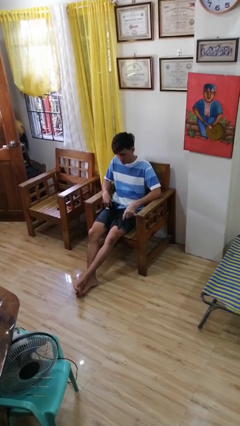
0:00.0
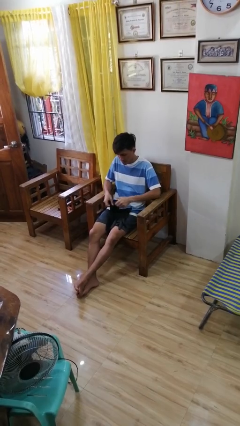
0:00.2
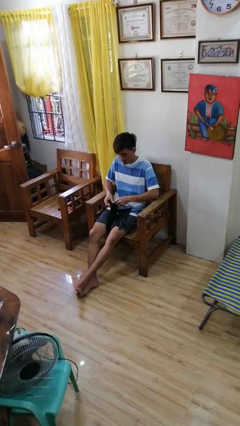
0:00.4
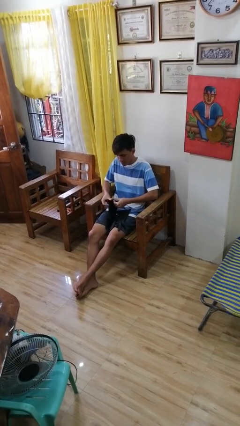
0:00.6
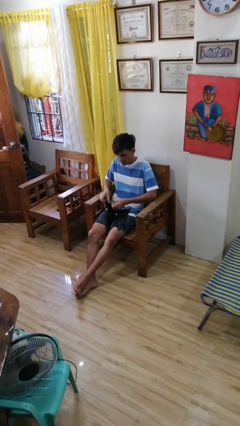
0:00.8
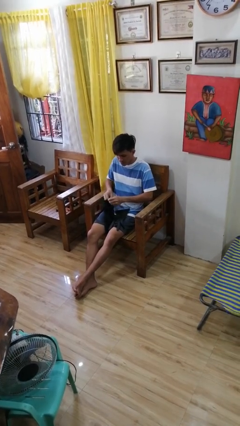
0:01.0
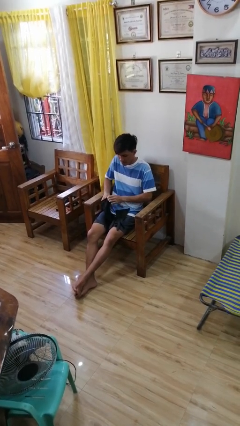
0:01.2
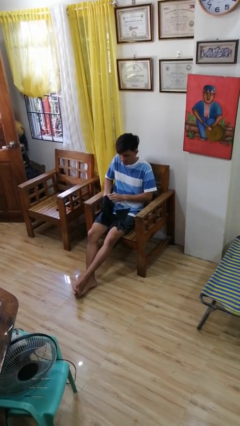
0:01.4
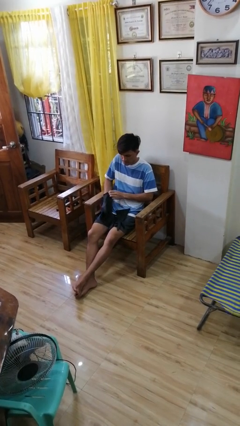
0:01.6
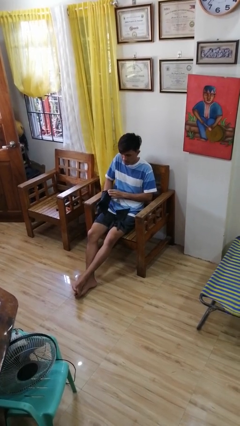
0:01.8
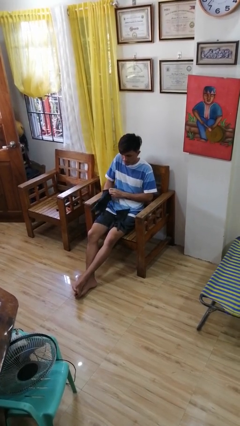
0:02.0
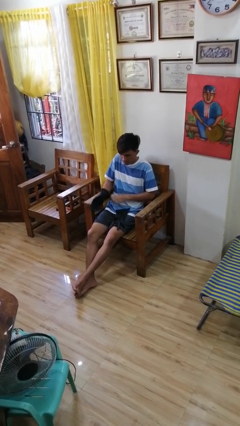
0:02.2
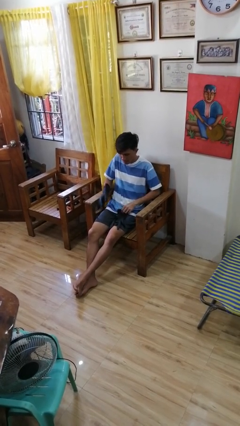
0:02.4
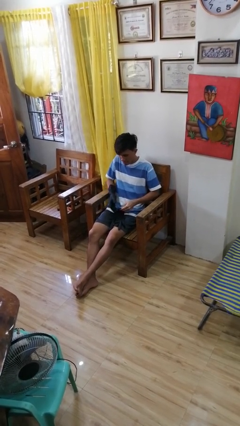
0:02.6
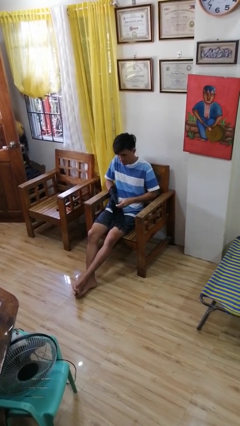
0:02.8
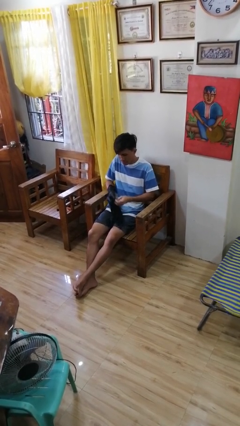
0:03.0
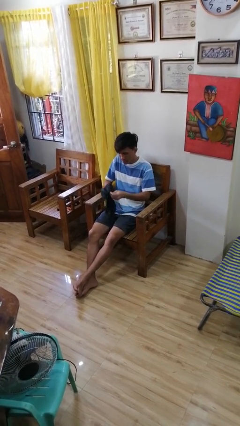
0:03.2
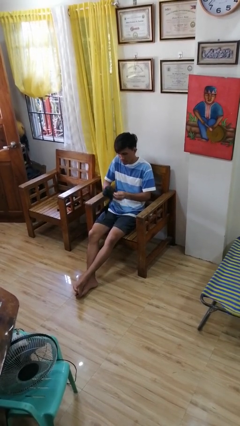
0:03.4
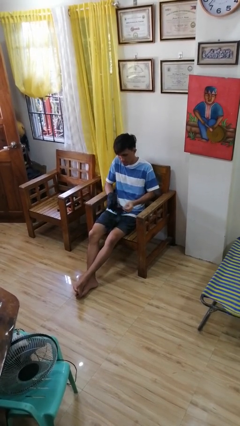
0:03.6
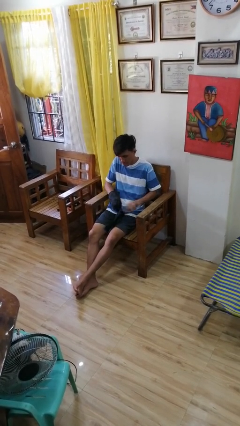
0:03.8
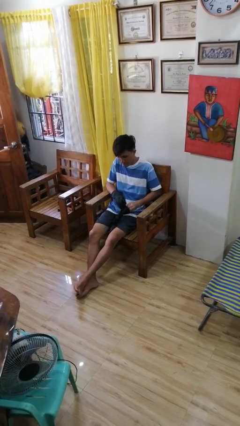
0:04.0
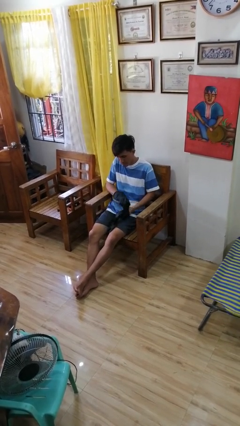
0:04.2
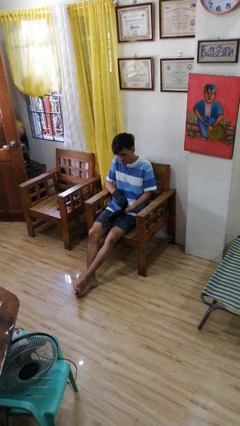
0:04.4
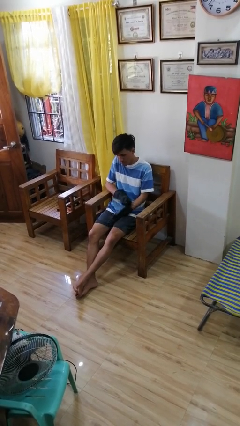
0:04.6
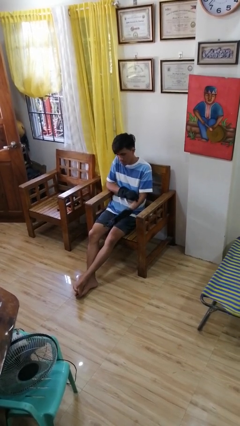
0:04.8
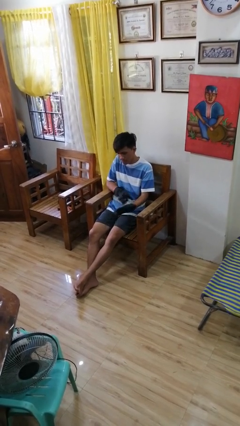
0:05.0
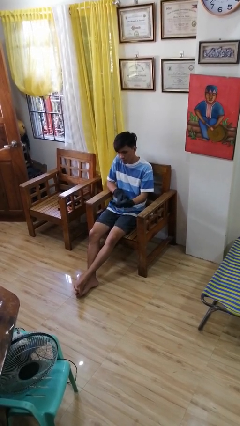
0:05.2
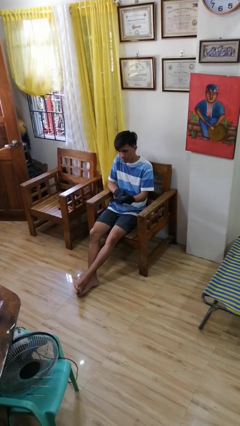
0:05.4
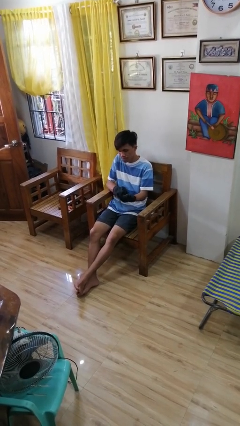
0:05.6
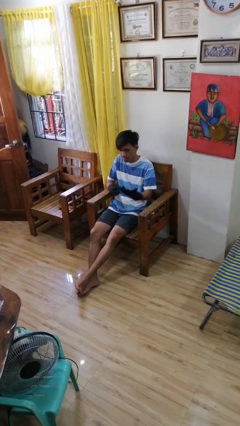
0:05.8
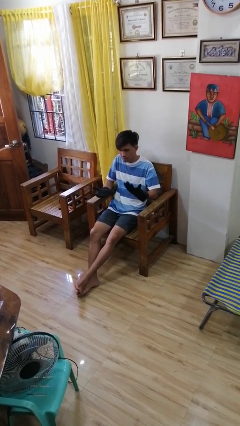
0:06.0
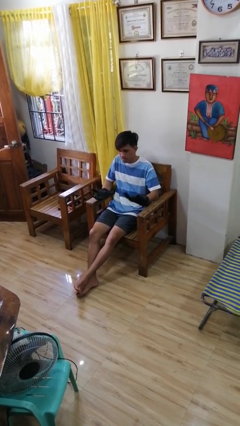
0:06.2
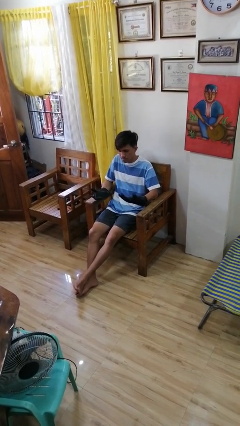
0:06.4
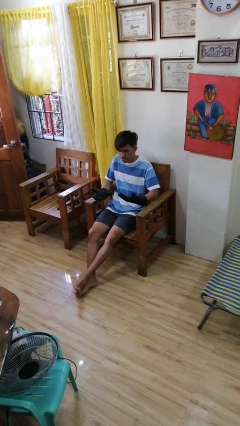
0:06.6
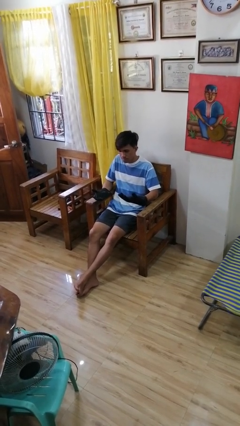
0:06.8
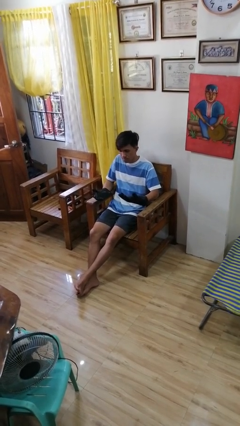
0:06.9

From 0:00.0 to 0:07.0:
person puts on gloves

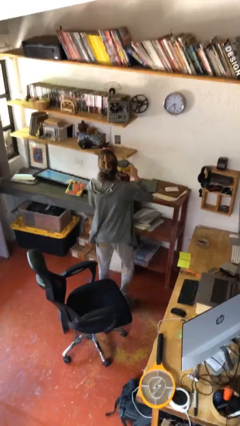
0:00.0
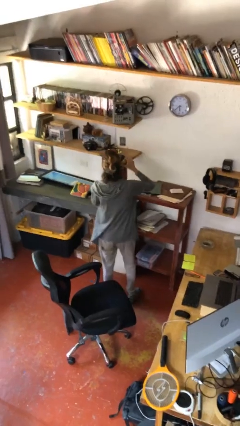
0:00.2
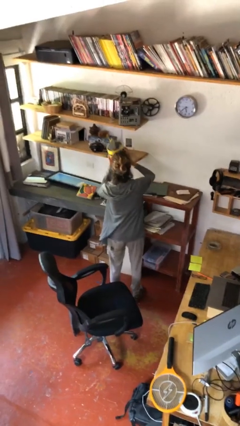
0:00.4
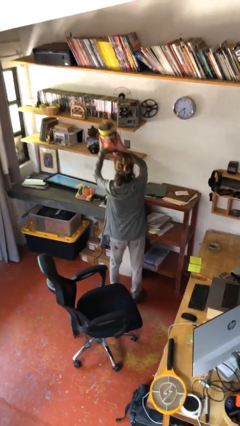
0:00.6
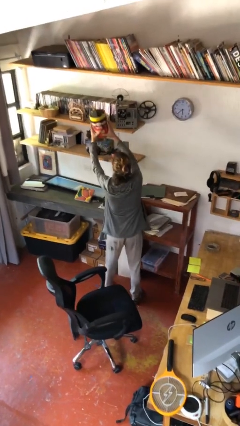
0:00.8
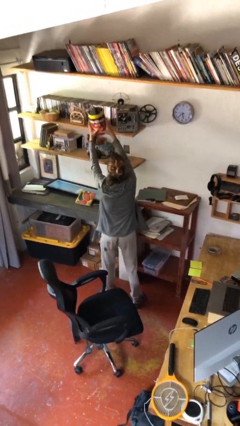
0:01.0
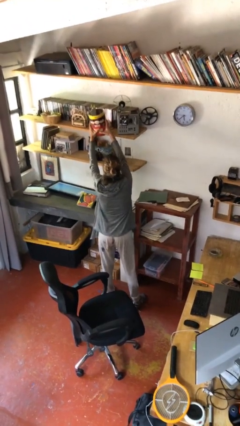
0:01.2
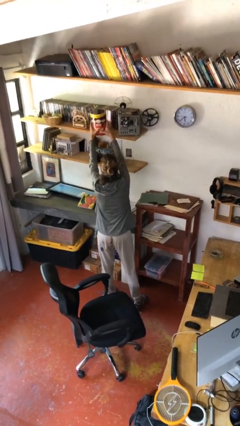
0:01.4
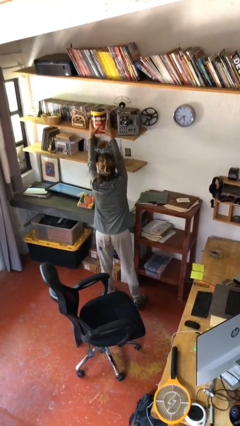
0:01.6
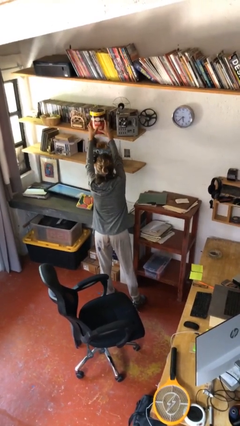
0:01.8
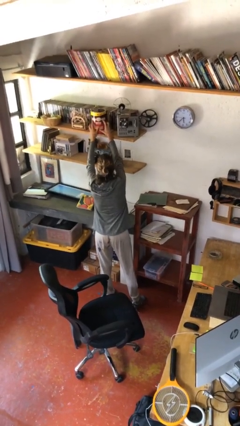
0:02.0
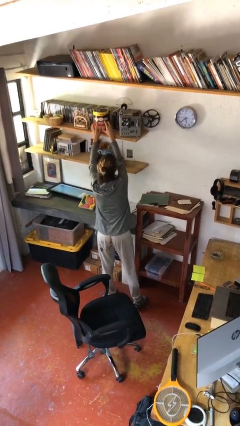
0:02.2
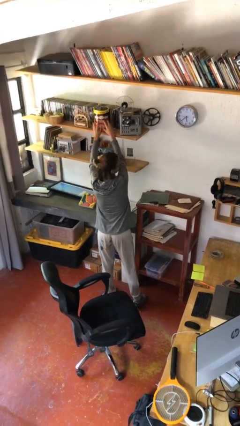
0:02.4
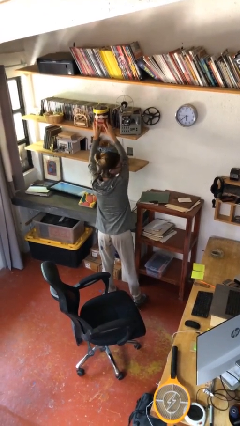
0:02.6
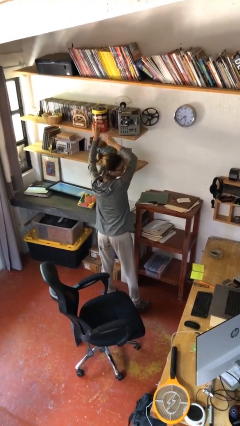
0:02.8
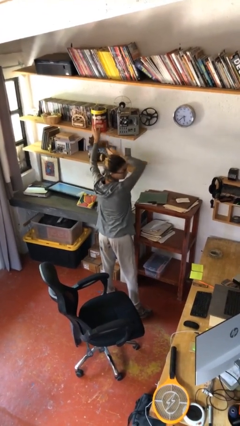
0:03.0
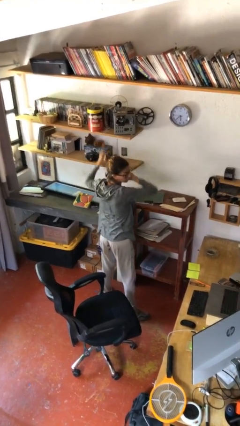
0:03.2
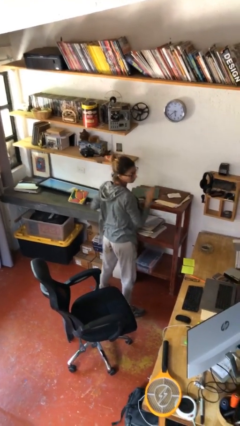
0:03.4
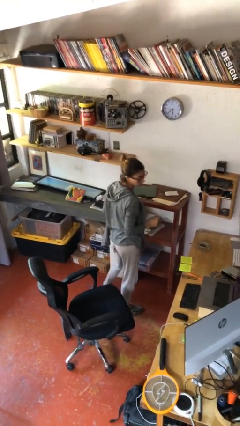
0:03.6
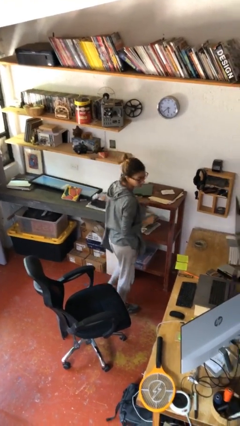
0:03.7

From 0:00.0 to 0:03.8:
person puts down object on shelf

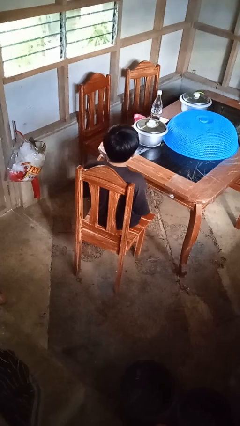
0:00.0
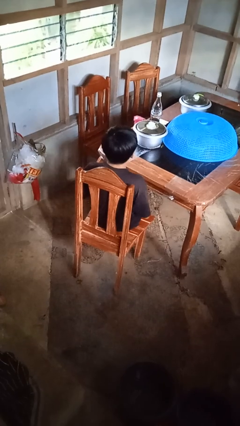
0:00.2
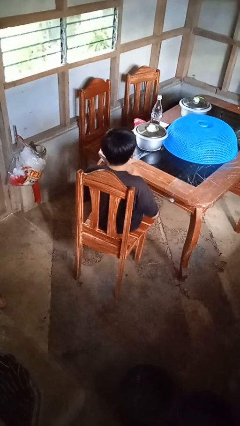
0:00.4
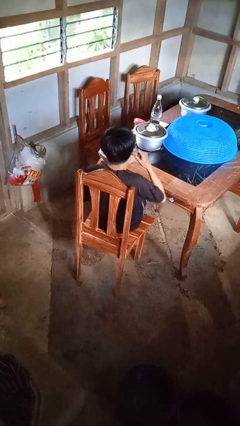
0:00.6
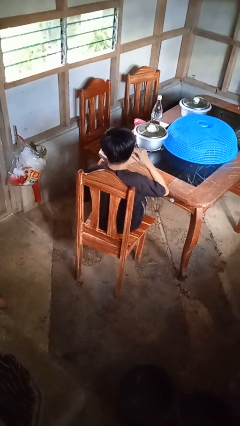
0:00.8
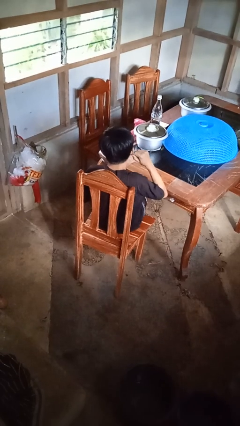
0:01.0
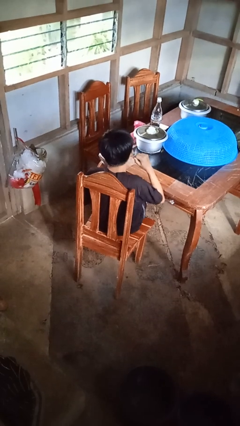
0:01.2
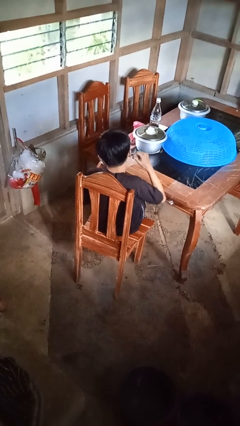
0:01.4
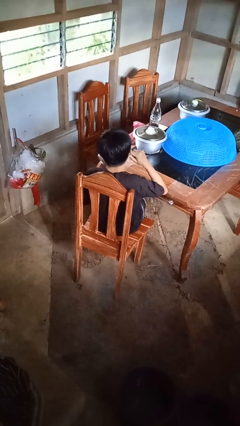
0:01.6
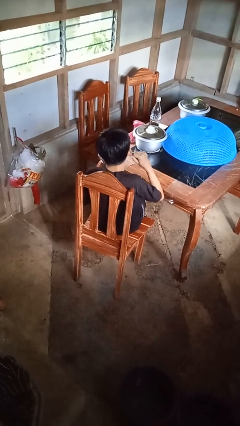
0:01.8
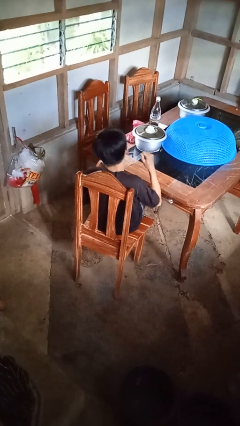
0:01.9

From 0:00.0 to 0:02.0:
person touches earlobe

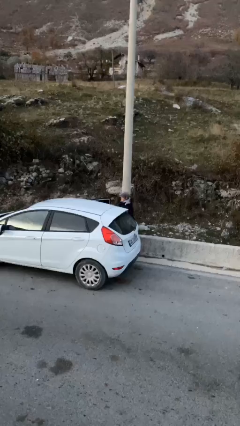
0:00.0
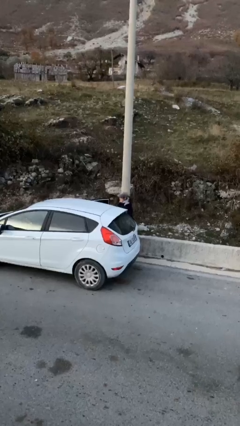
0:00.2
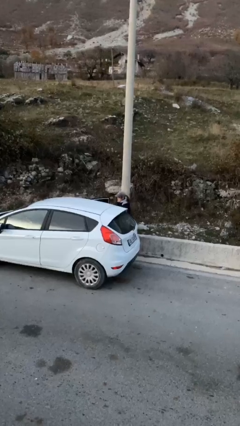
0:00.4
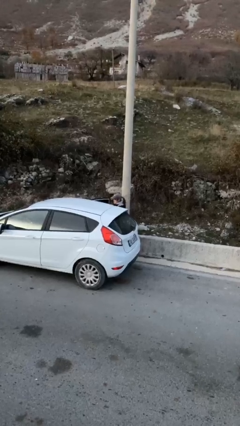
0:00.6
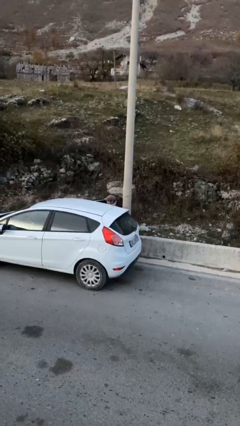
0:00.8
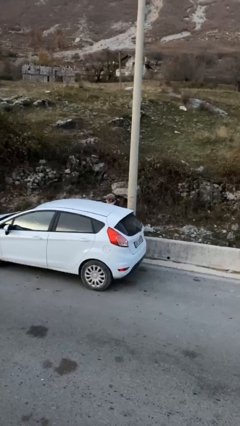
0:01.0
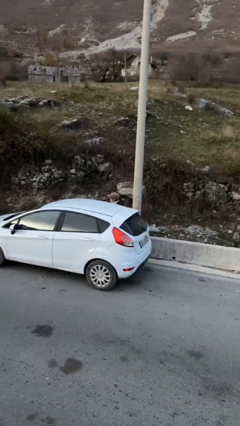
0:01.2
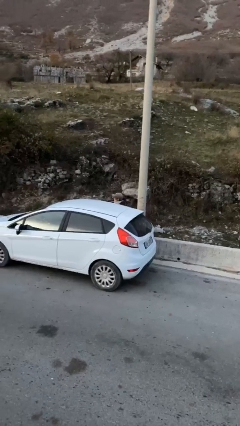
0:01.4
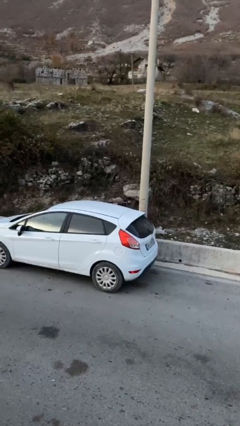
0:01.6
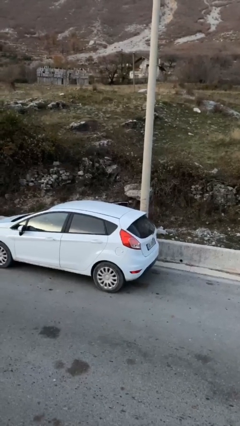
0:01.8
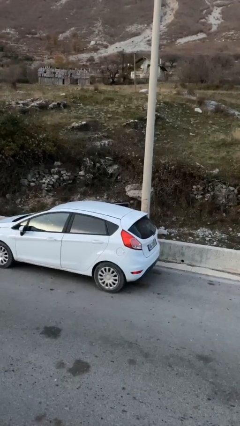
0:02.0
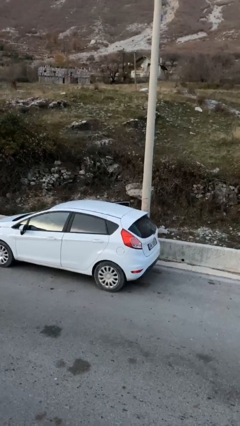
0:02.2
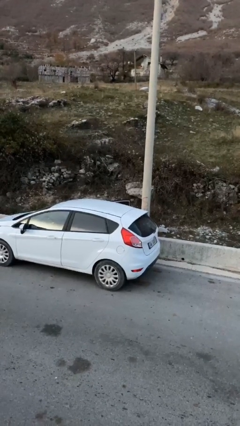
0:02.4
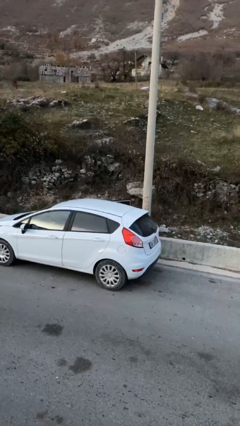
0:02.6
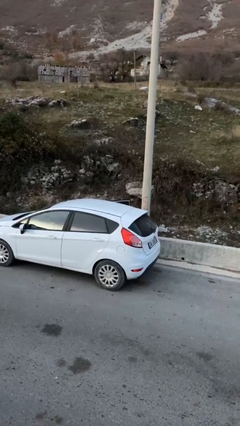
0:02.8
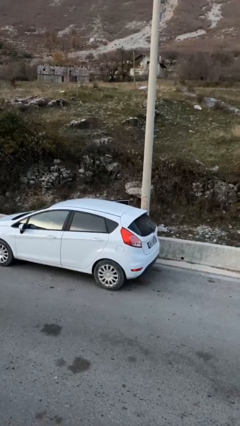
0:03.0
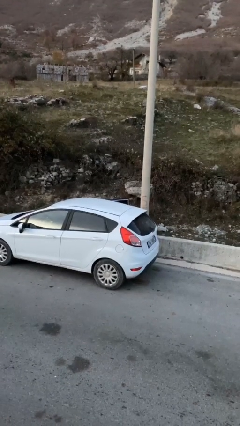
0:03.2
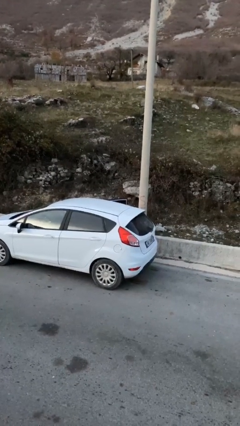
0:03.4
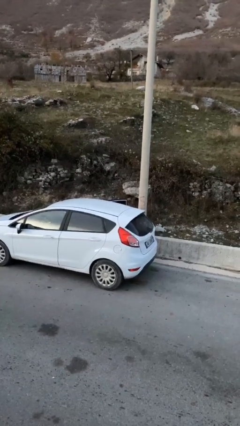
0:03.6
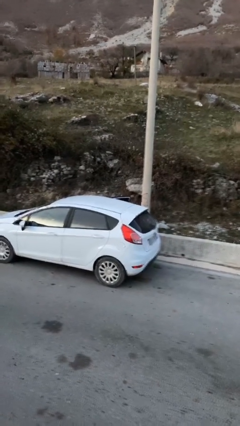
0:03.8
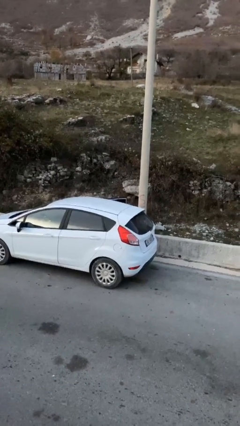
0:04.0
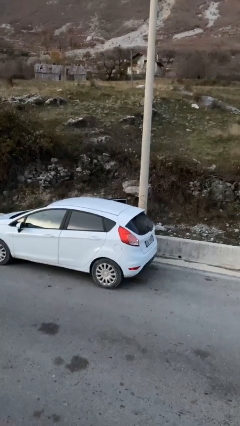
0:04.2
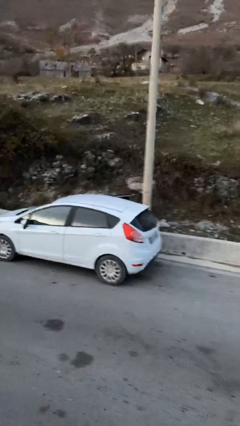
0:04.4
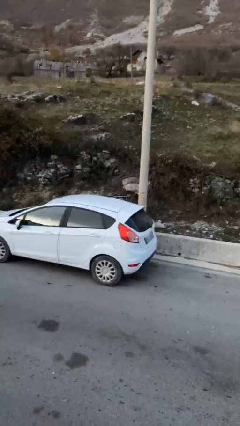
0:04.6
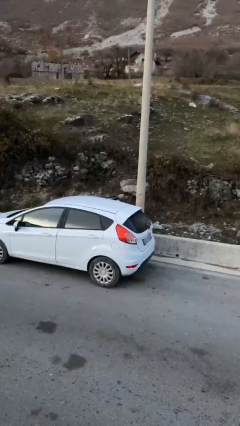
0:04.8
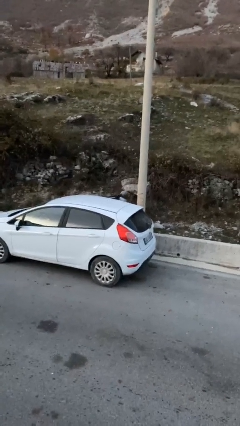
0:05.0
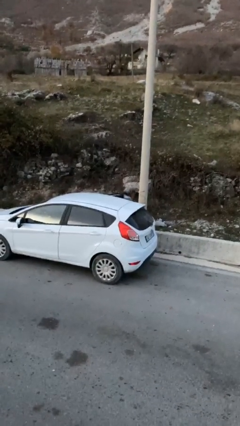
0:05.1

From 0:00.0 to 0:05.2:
person enters car
